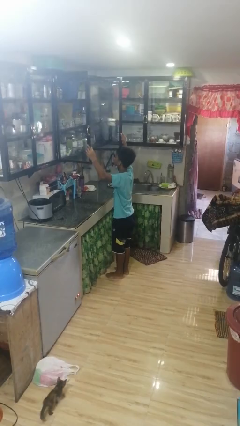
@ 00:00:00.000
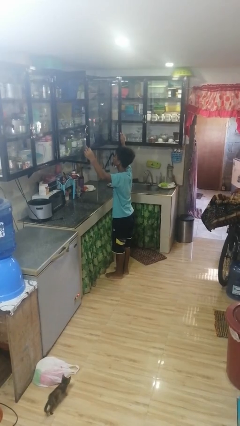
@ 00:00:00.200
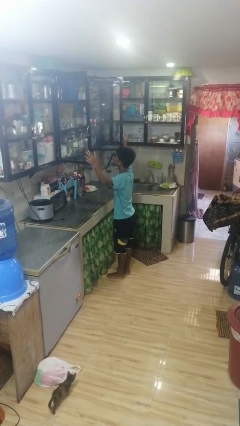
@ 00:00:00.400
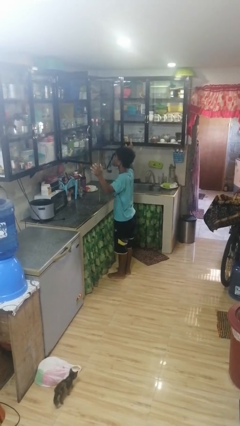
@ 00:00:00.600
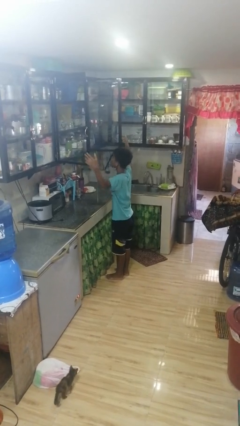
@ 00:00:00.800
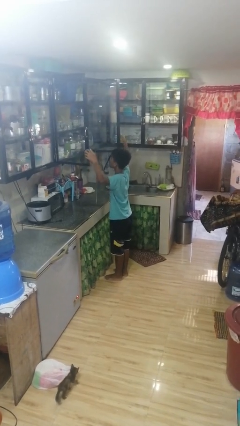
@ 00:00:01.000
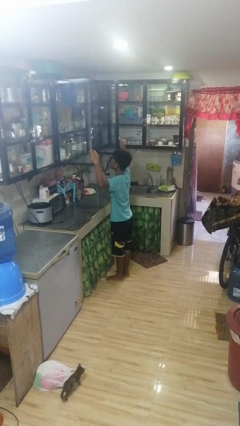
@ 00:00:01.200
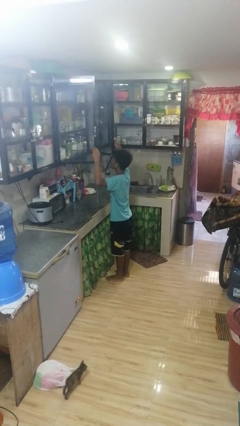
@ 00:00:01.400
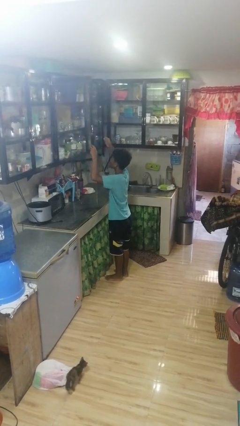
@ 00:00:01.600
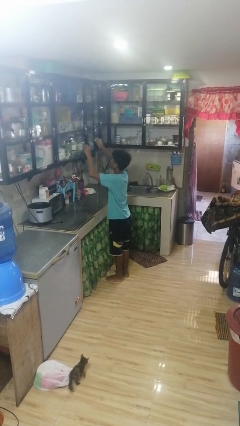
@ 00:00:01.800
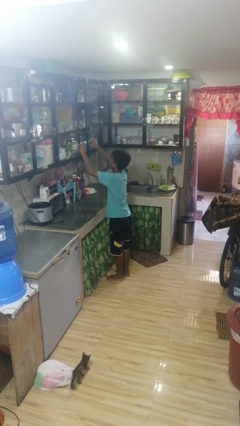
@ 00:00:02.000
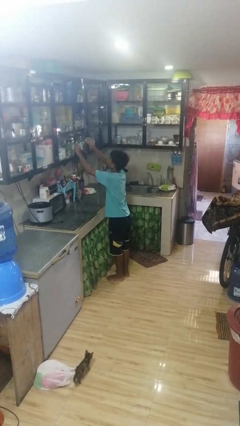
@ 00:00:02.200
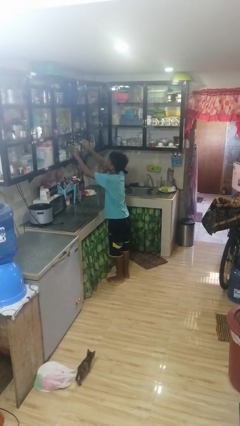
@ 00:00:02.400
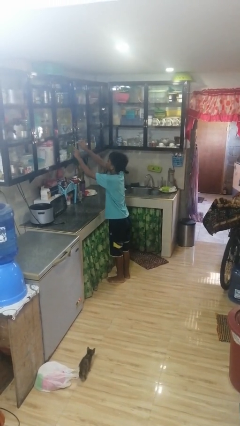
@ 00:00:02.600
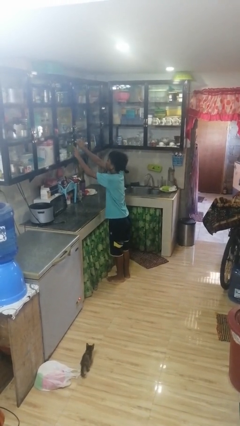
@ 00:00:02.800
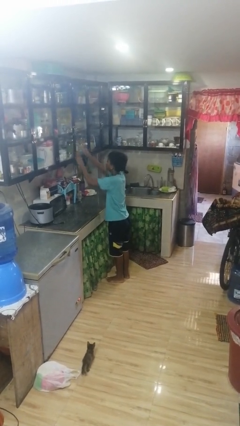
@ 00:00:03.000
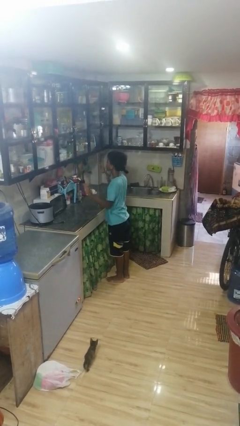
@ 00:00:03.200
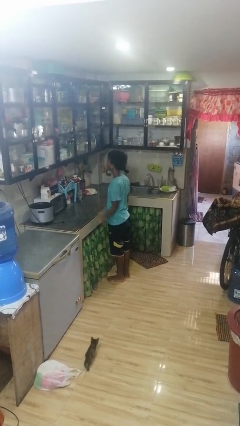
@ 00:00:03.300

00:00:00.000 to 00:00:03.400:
person closes cabinet

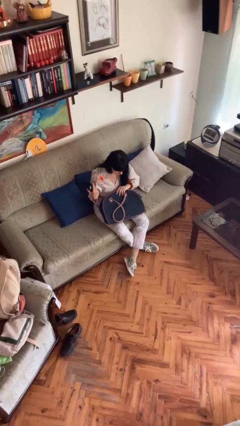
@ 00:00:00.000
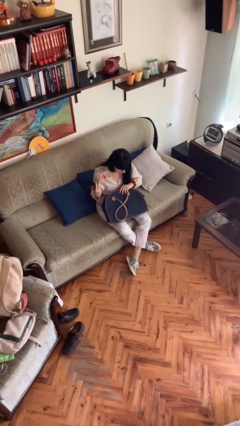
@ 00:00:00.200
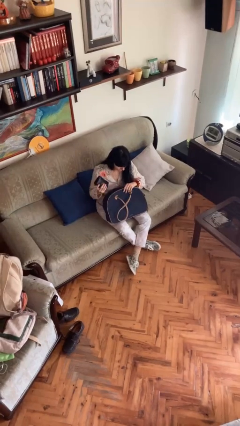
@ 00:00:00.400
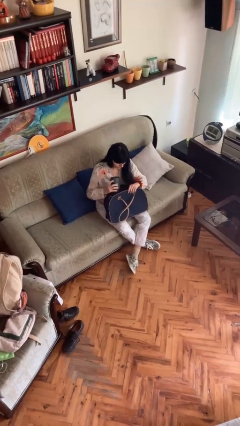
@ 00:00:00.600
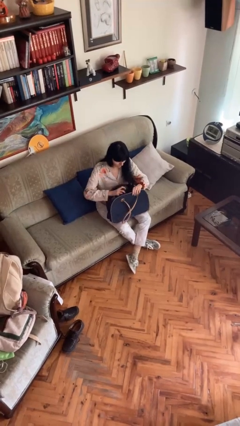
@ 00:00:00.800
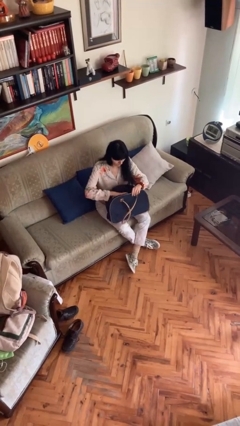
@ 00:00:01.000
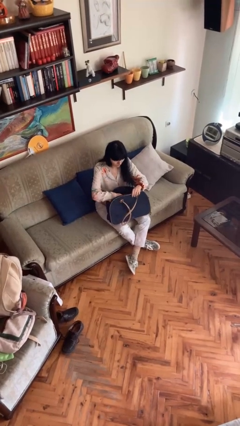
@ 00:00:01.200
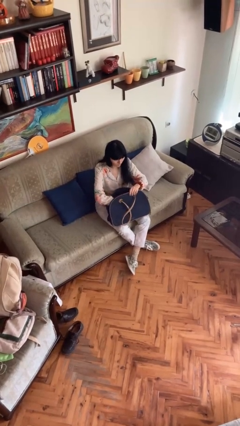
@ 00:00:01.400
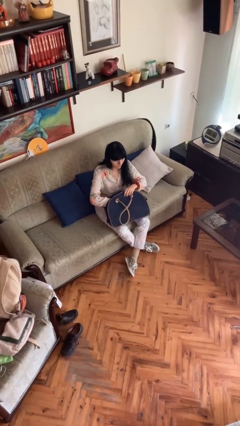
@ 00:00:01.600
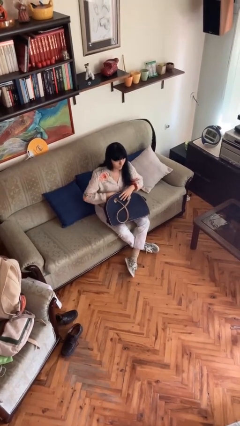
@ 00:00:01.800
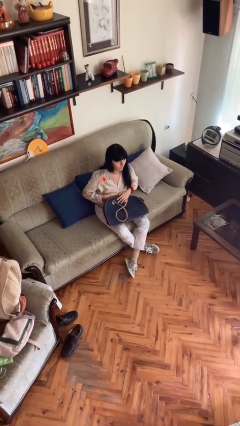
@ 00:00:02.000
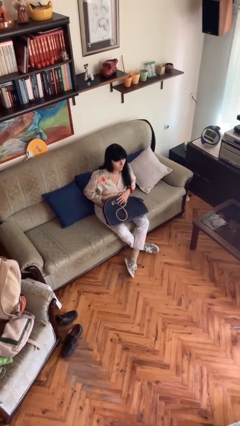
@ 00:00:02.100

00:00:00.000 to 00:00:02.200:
person puts object into purse

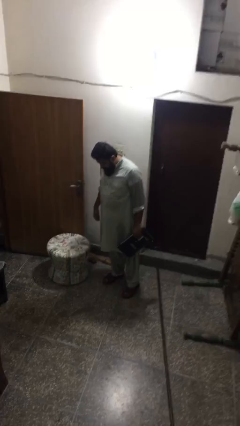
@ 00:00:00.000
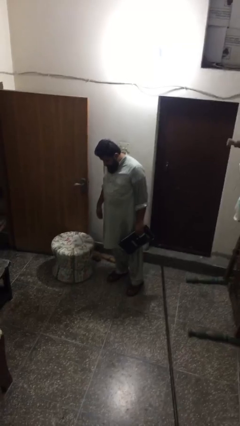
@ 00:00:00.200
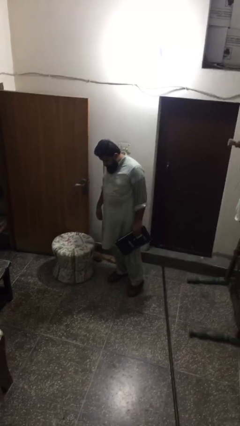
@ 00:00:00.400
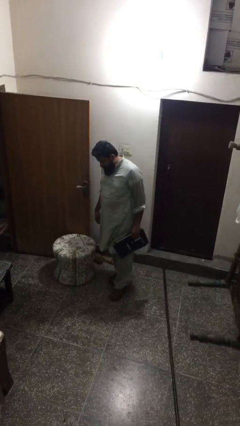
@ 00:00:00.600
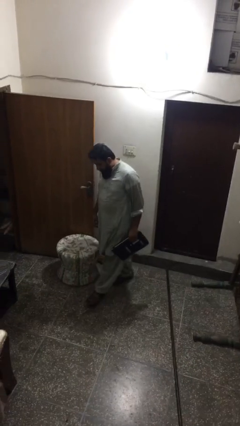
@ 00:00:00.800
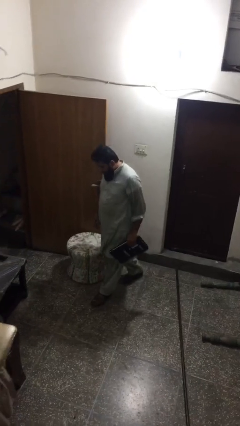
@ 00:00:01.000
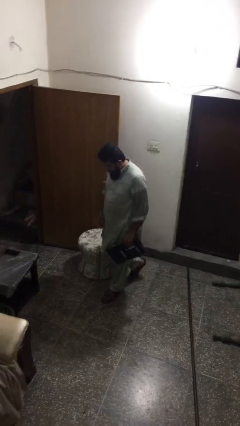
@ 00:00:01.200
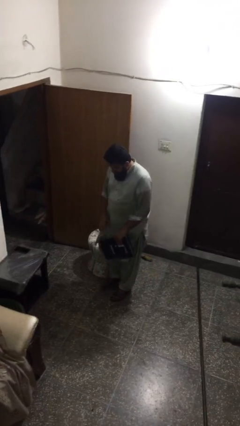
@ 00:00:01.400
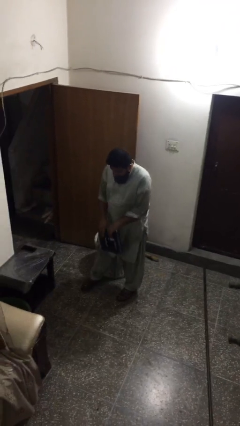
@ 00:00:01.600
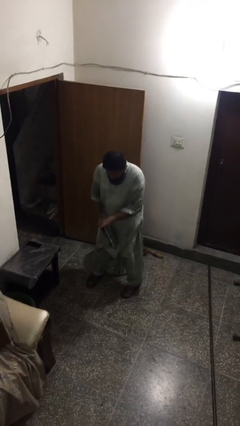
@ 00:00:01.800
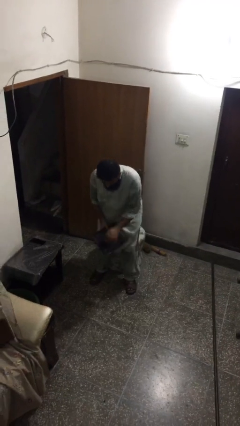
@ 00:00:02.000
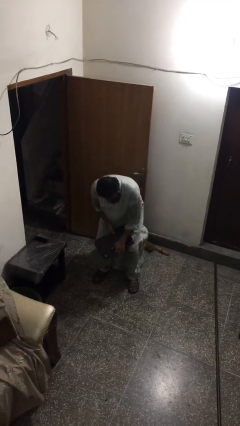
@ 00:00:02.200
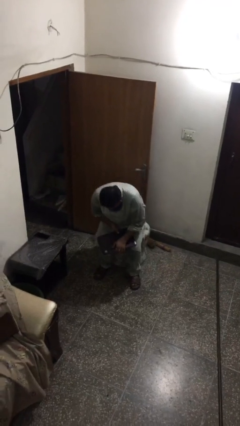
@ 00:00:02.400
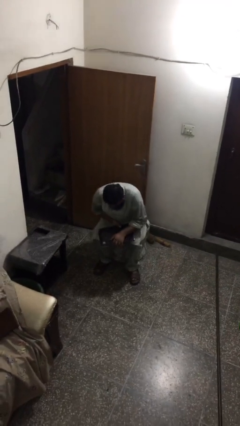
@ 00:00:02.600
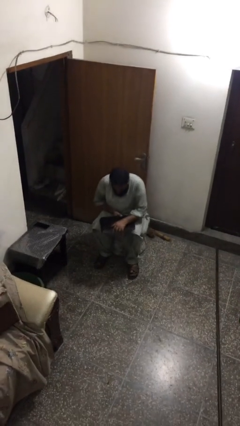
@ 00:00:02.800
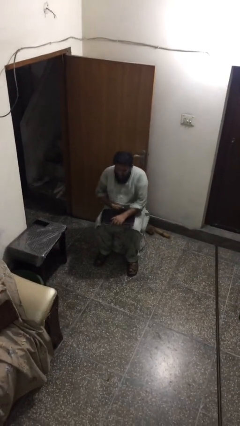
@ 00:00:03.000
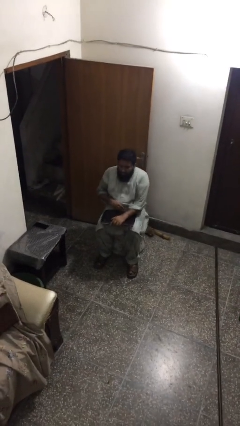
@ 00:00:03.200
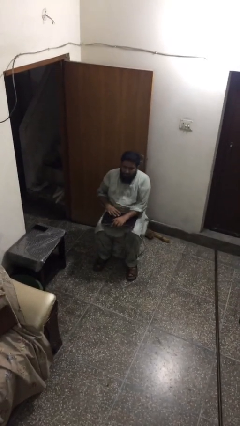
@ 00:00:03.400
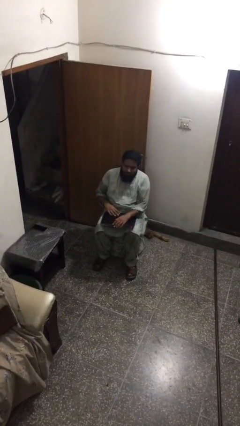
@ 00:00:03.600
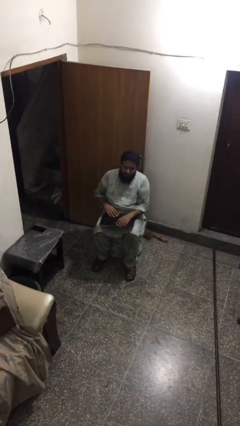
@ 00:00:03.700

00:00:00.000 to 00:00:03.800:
person sits down

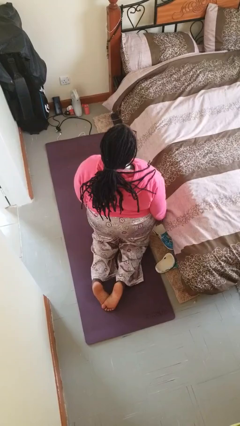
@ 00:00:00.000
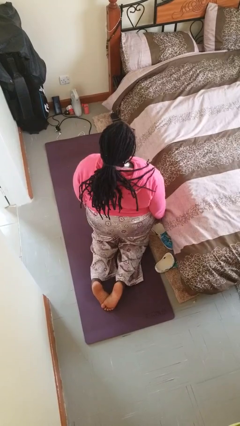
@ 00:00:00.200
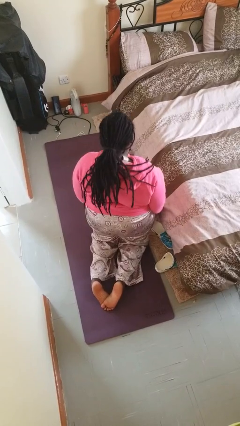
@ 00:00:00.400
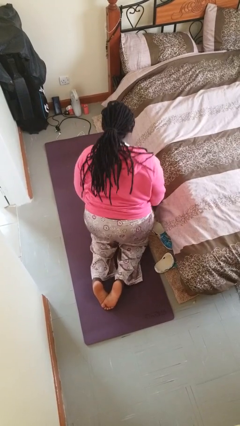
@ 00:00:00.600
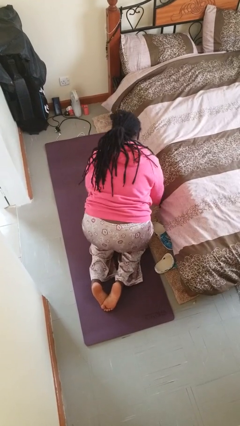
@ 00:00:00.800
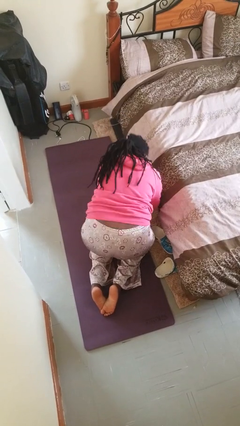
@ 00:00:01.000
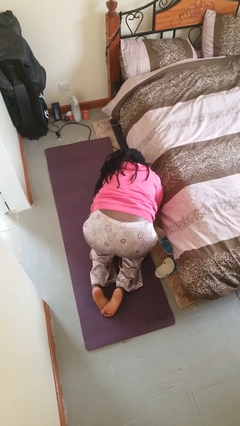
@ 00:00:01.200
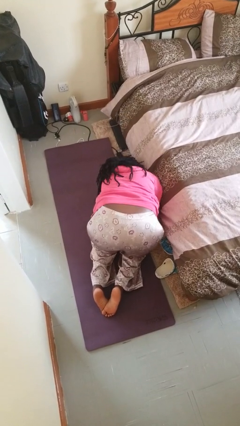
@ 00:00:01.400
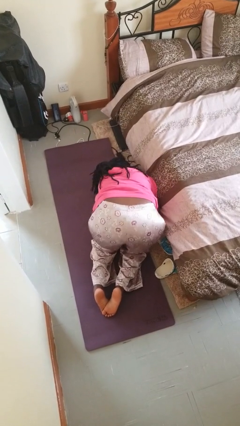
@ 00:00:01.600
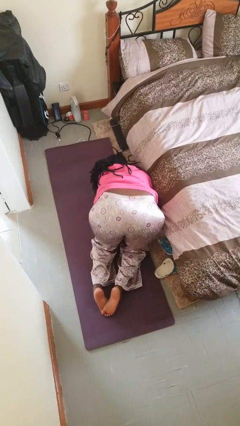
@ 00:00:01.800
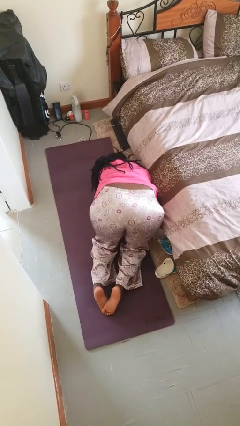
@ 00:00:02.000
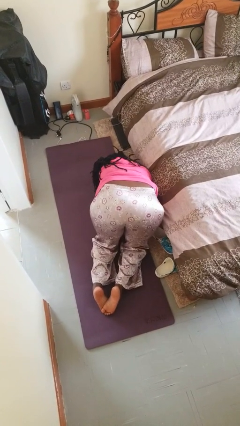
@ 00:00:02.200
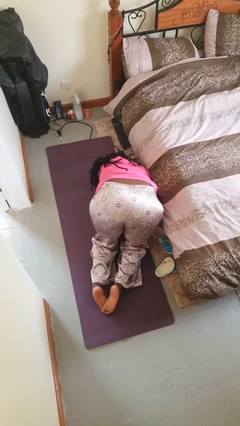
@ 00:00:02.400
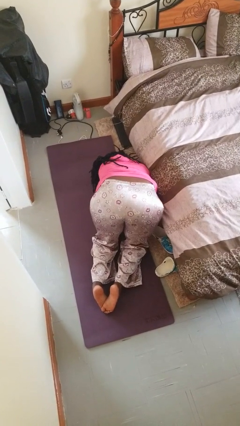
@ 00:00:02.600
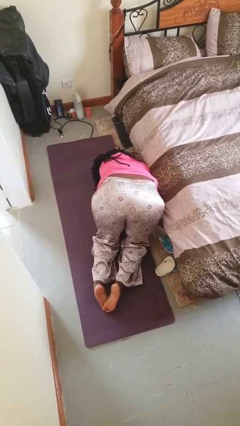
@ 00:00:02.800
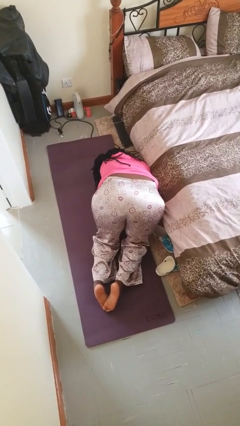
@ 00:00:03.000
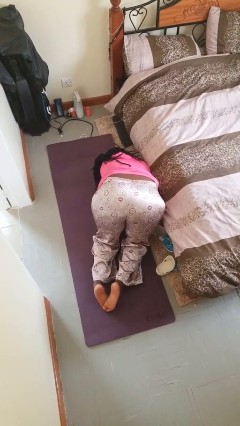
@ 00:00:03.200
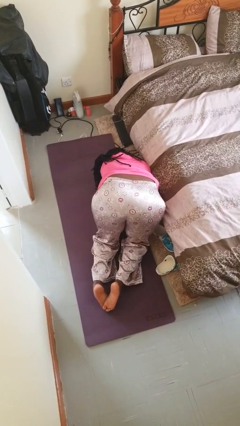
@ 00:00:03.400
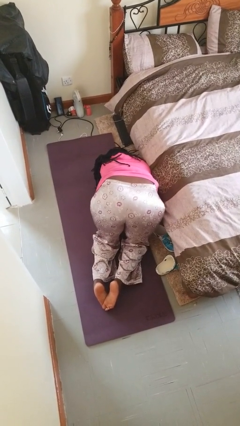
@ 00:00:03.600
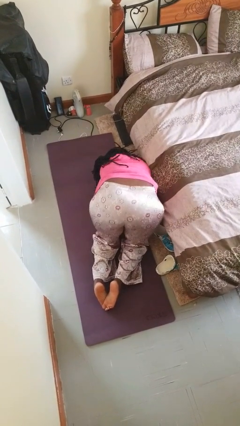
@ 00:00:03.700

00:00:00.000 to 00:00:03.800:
person searches under bed

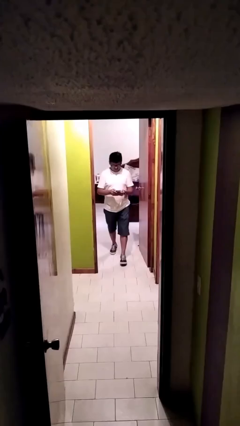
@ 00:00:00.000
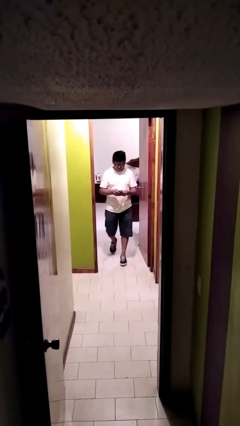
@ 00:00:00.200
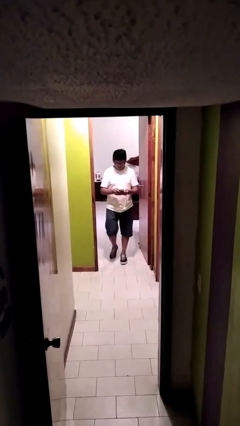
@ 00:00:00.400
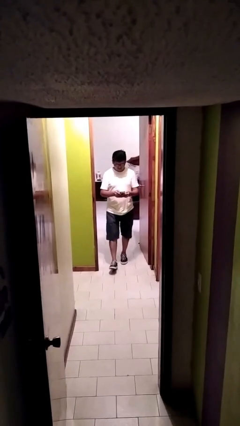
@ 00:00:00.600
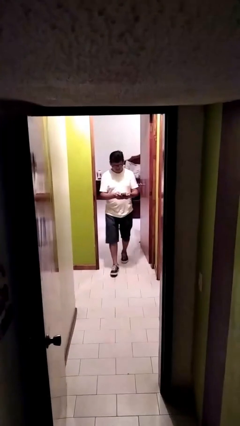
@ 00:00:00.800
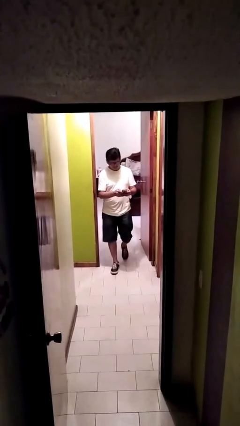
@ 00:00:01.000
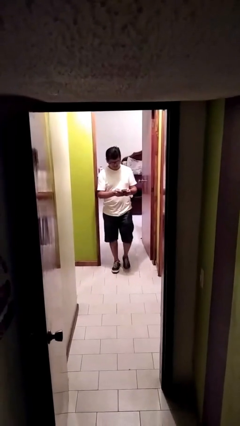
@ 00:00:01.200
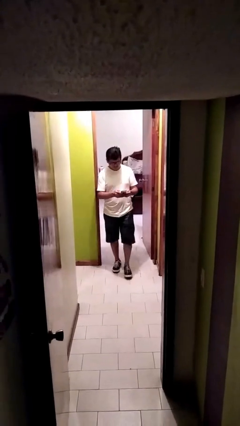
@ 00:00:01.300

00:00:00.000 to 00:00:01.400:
person enters scene through structure

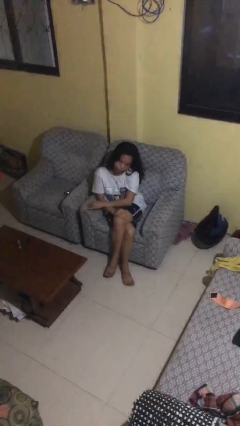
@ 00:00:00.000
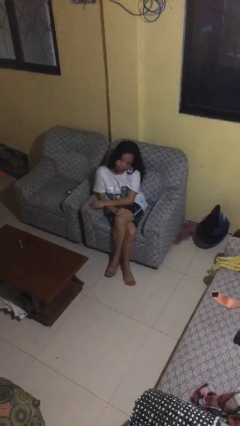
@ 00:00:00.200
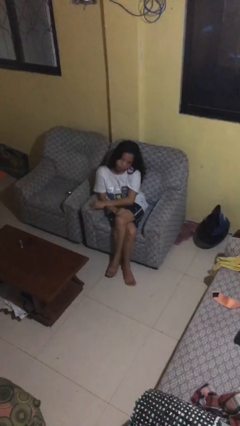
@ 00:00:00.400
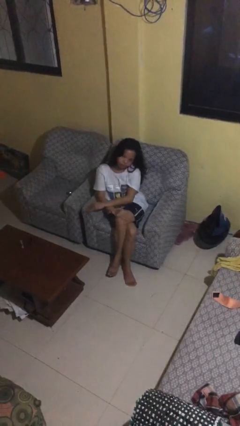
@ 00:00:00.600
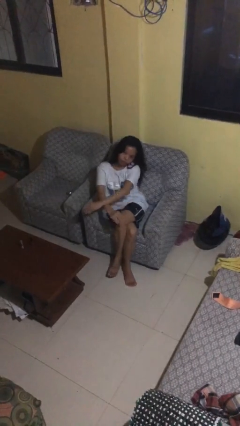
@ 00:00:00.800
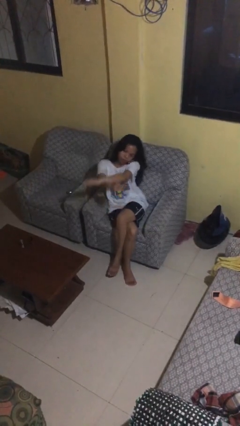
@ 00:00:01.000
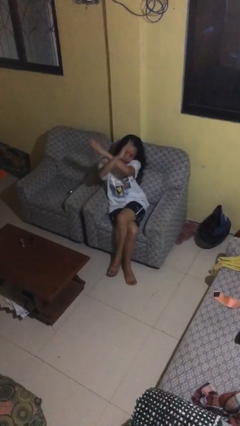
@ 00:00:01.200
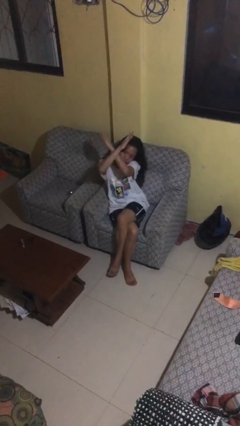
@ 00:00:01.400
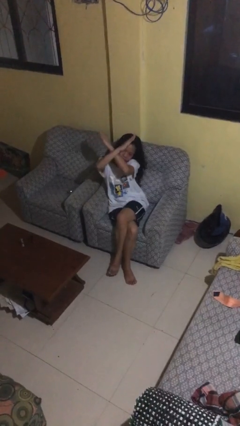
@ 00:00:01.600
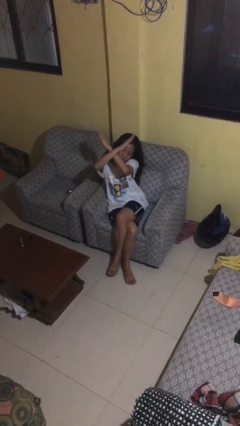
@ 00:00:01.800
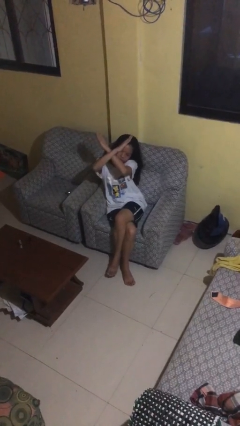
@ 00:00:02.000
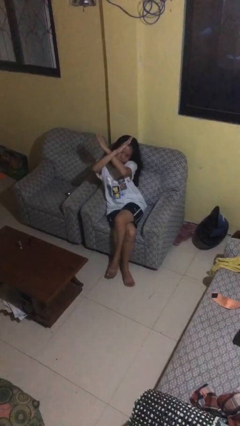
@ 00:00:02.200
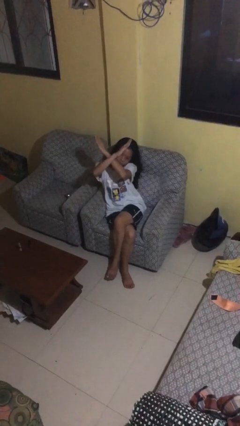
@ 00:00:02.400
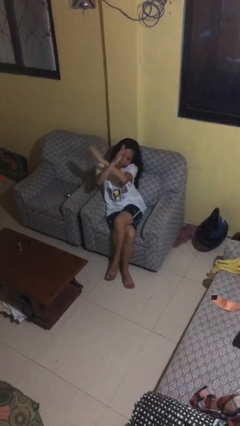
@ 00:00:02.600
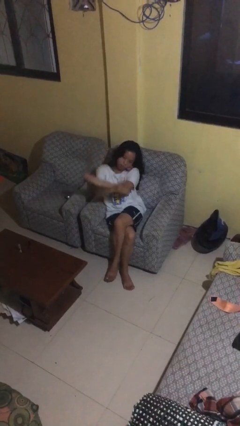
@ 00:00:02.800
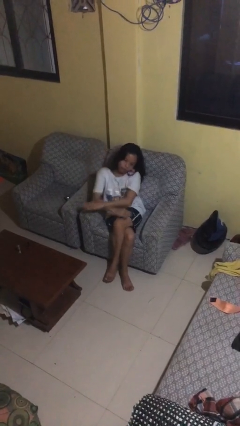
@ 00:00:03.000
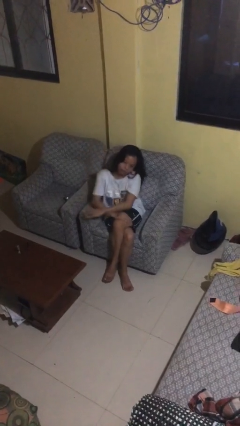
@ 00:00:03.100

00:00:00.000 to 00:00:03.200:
person gestures arms x
